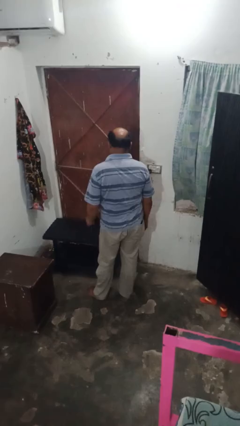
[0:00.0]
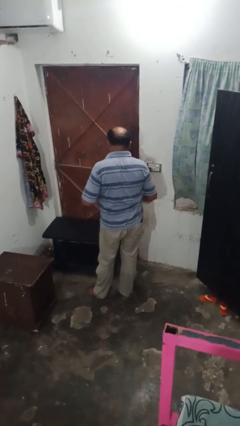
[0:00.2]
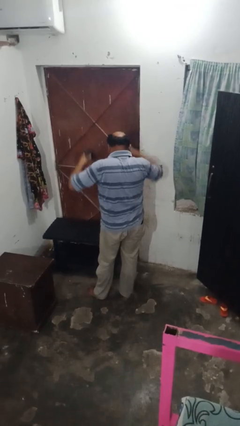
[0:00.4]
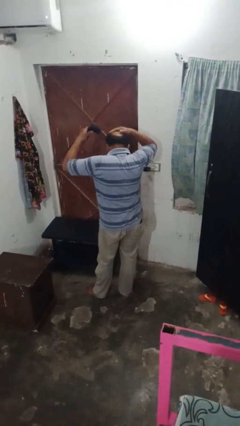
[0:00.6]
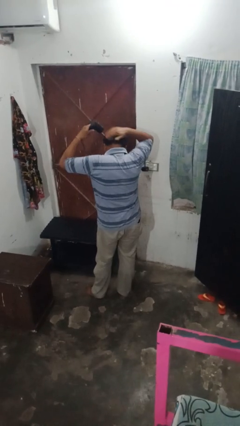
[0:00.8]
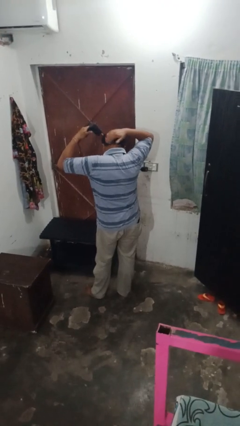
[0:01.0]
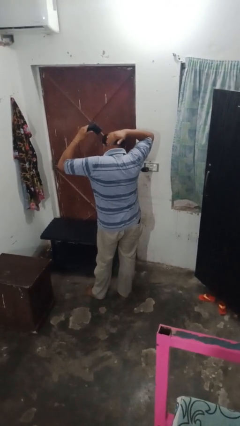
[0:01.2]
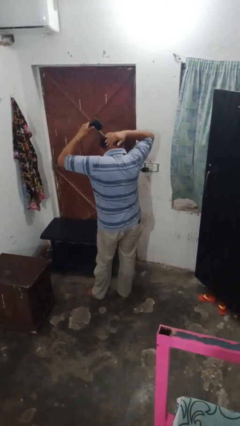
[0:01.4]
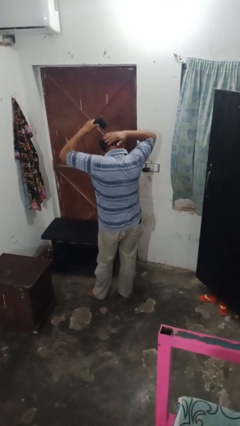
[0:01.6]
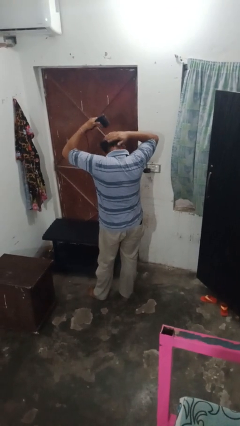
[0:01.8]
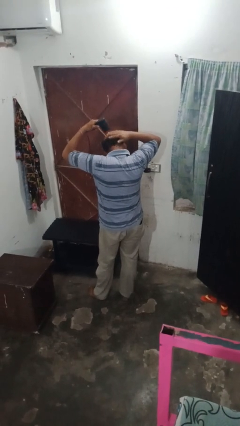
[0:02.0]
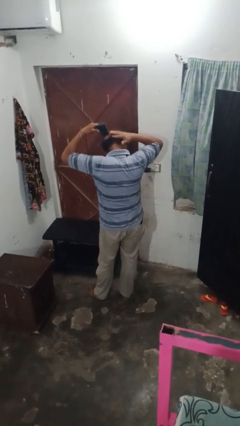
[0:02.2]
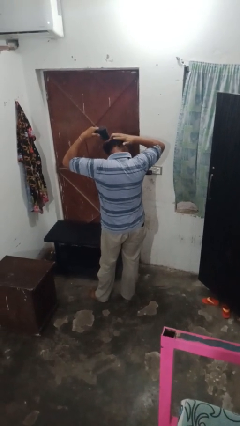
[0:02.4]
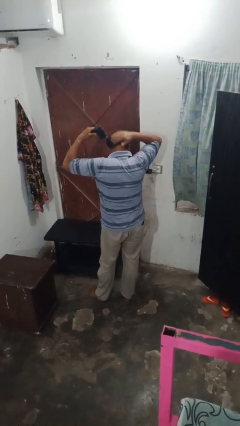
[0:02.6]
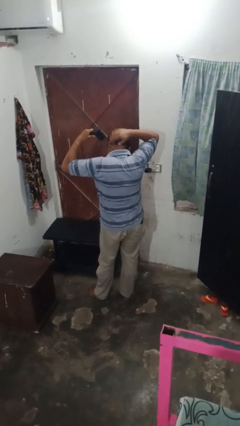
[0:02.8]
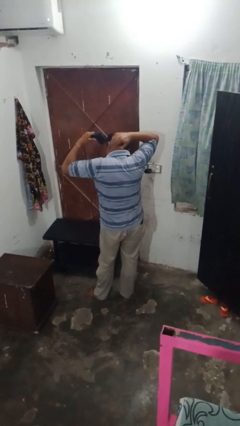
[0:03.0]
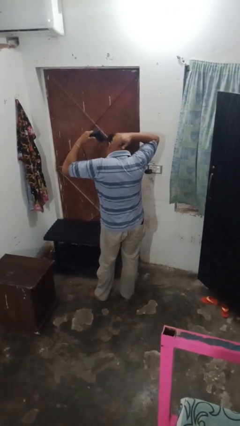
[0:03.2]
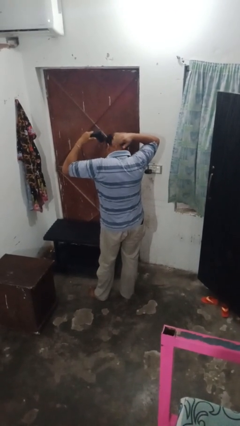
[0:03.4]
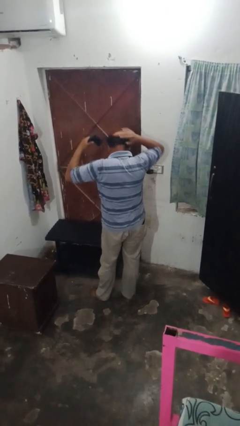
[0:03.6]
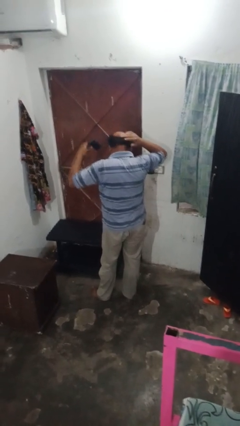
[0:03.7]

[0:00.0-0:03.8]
person dries hair with hairdryer

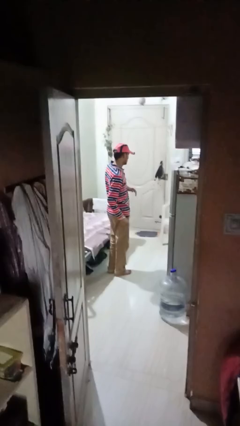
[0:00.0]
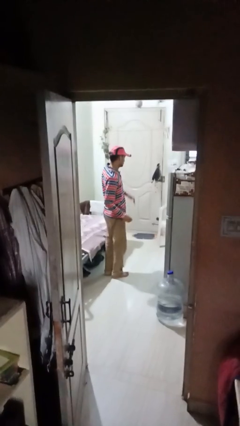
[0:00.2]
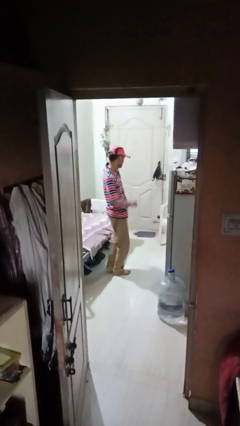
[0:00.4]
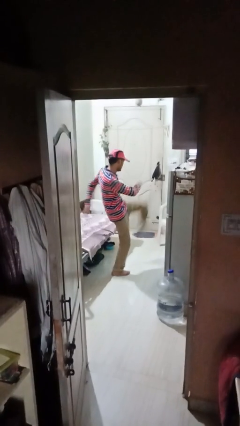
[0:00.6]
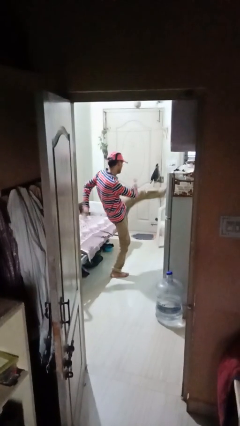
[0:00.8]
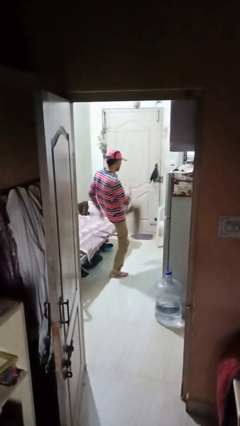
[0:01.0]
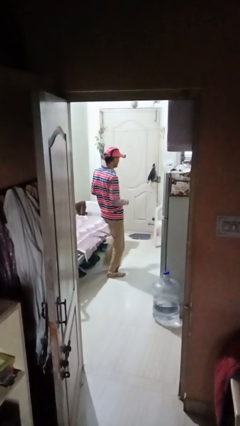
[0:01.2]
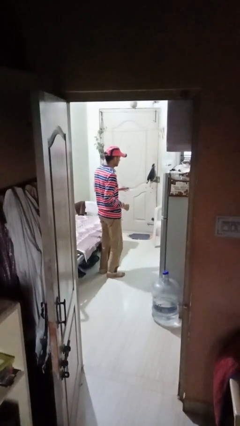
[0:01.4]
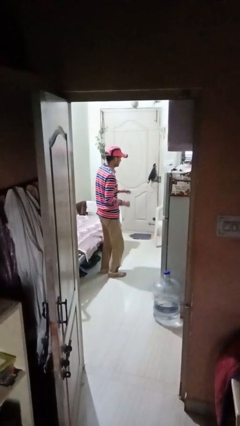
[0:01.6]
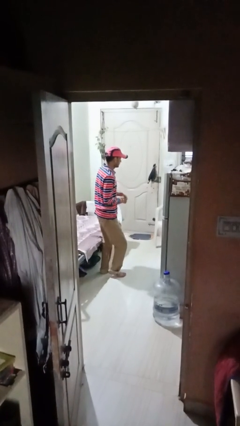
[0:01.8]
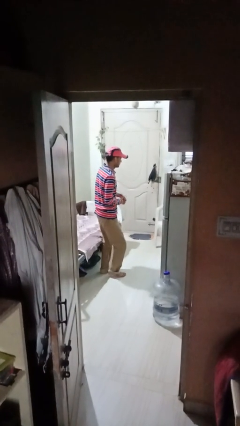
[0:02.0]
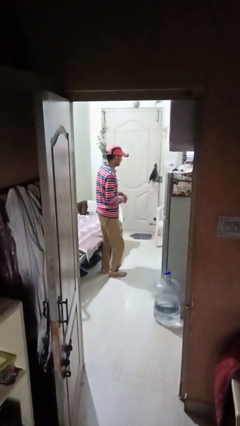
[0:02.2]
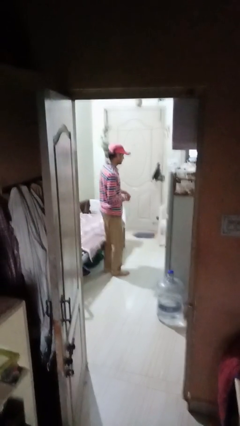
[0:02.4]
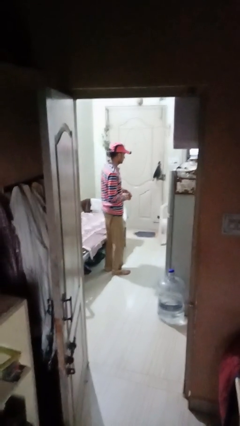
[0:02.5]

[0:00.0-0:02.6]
person karate kicks

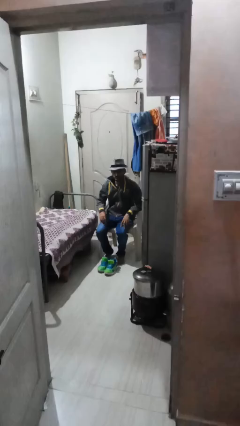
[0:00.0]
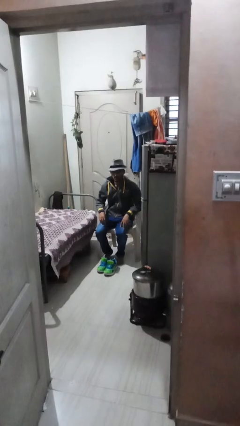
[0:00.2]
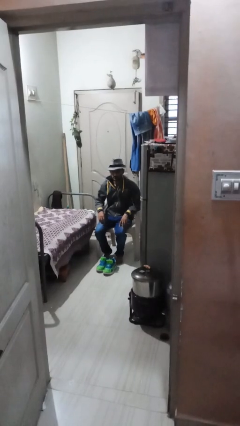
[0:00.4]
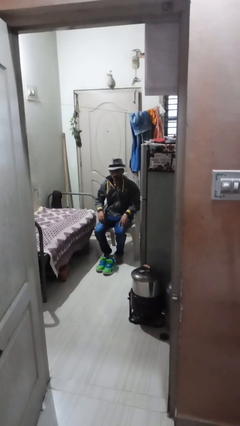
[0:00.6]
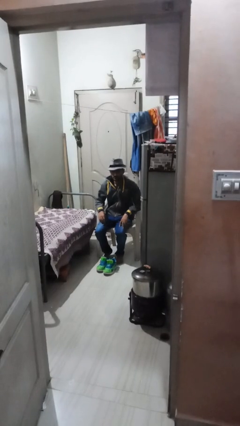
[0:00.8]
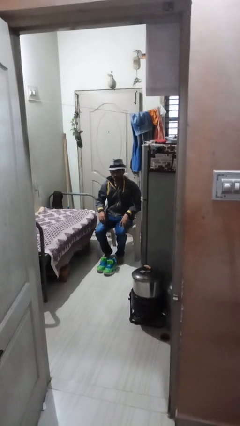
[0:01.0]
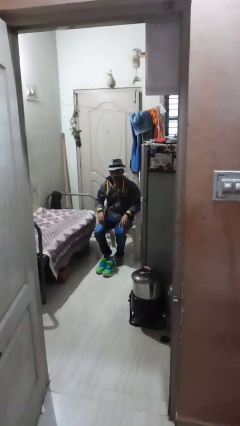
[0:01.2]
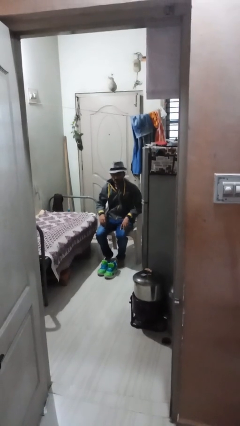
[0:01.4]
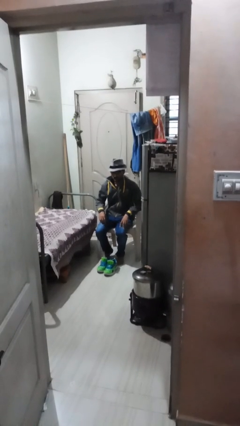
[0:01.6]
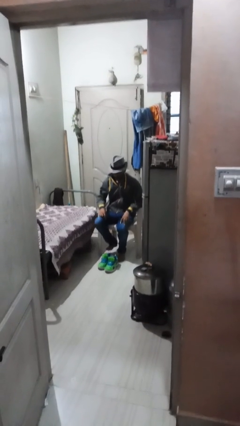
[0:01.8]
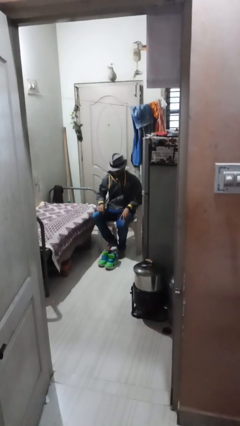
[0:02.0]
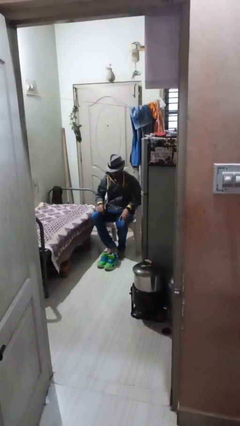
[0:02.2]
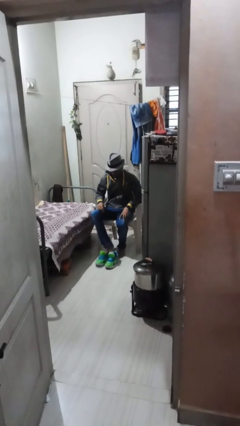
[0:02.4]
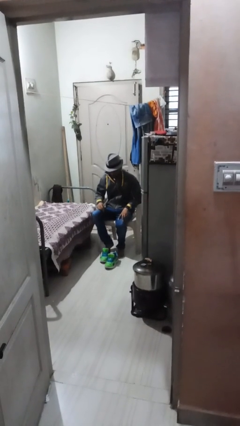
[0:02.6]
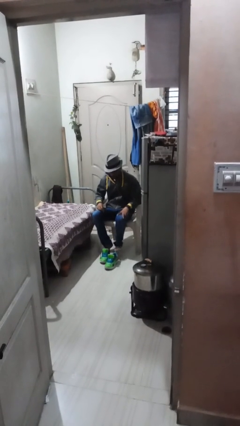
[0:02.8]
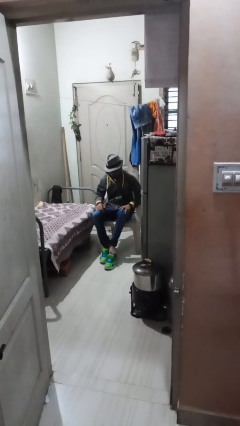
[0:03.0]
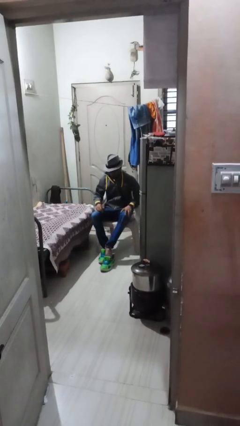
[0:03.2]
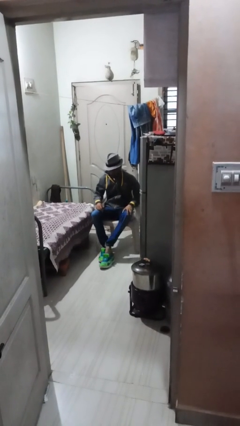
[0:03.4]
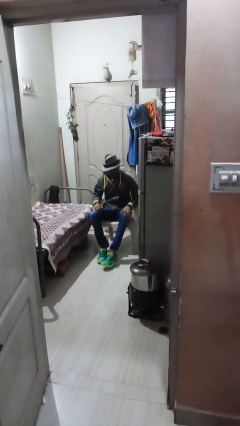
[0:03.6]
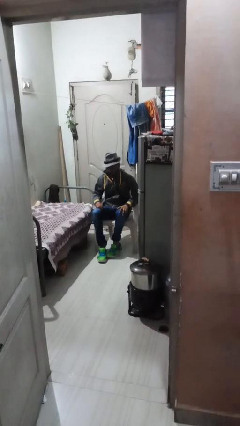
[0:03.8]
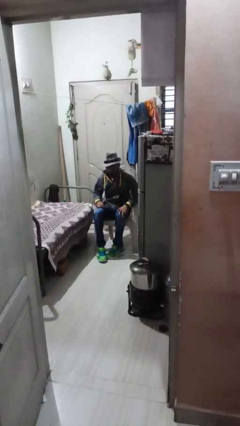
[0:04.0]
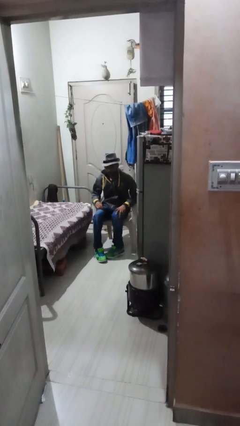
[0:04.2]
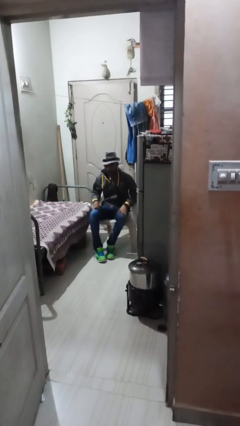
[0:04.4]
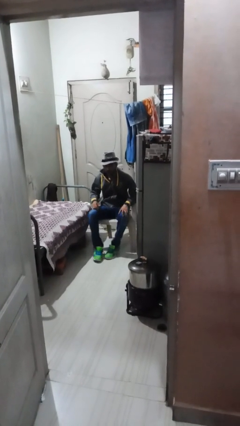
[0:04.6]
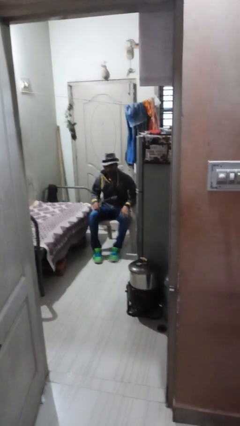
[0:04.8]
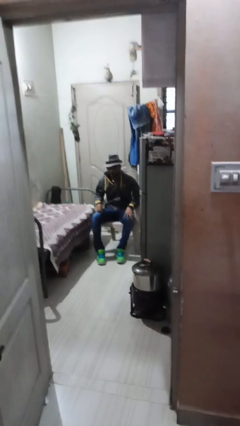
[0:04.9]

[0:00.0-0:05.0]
person puts on shoes

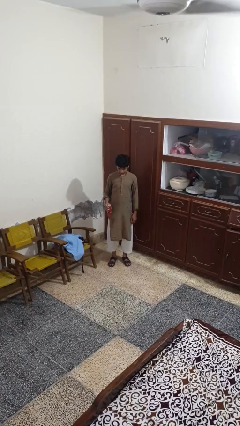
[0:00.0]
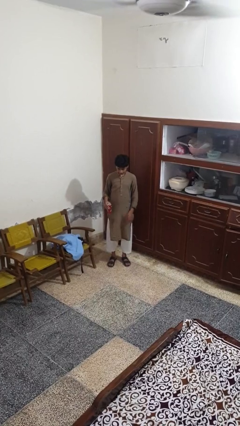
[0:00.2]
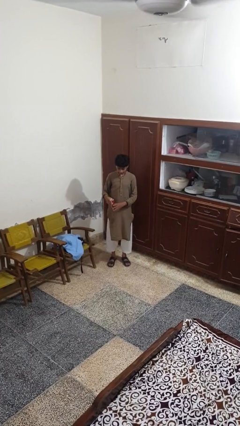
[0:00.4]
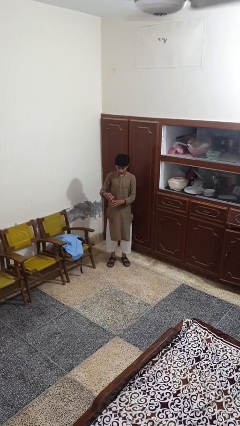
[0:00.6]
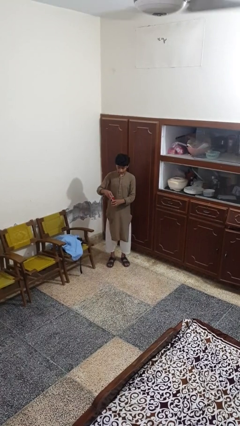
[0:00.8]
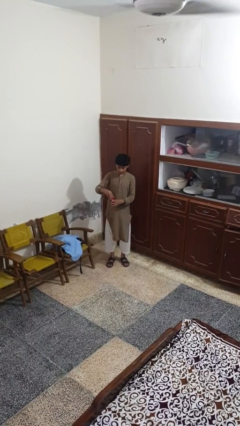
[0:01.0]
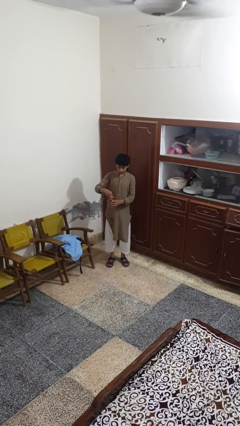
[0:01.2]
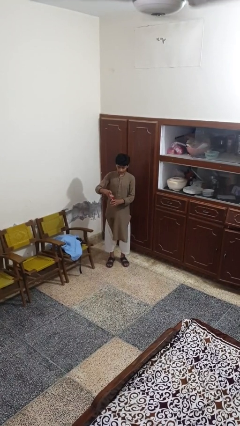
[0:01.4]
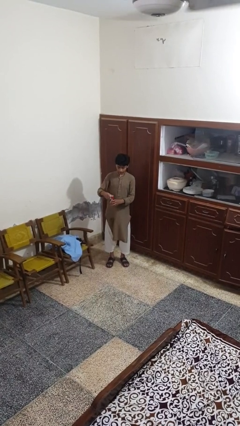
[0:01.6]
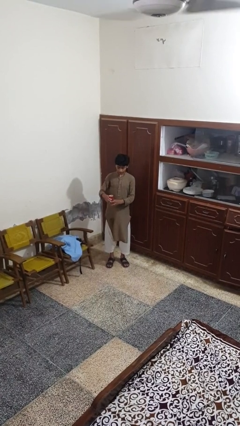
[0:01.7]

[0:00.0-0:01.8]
person opens beverage can

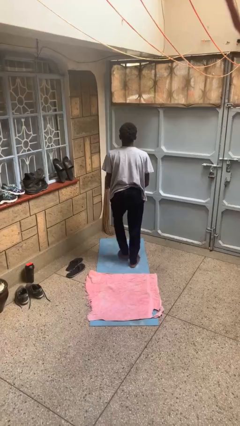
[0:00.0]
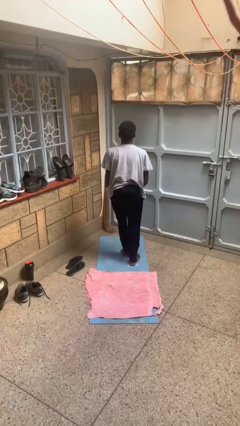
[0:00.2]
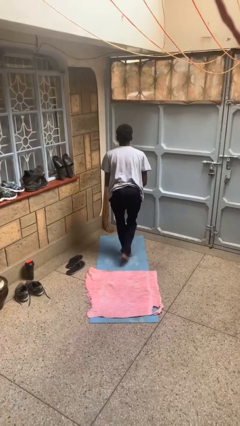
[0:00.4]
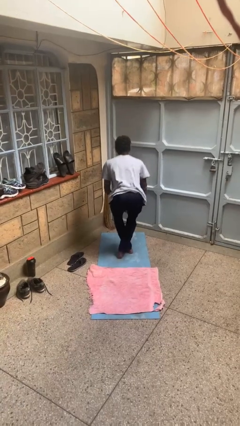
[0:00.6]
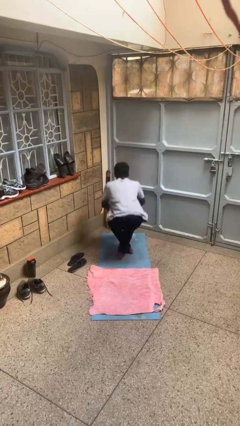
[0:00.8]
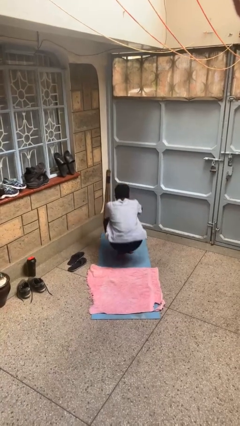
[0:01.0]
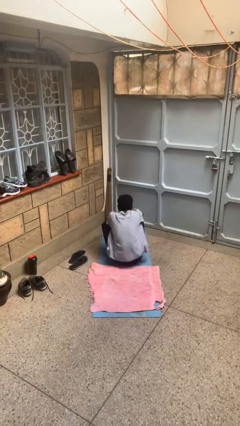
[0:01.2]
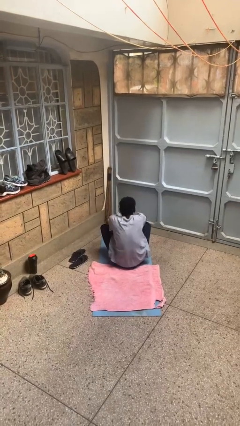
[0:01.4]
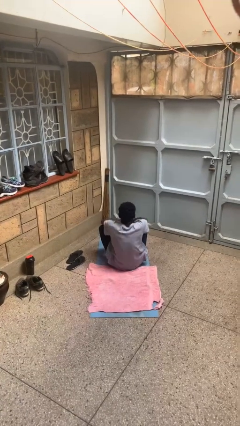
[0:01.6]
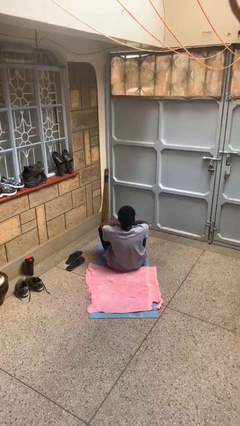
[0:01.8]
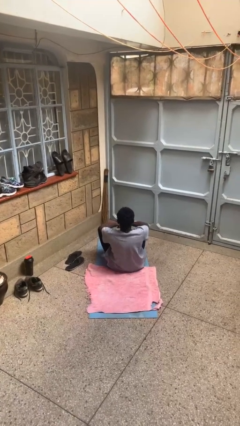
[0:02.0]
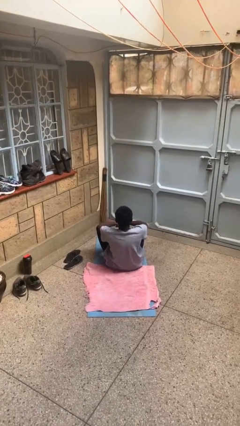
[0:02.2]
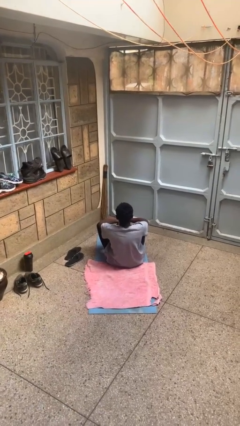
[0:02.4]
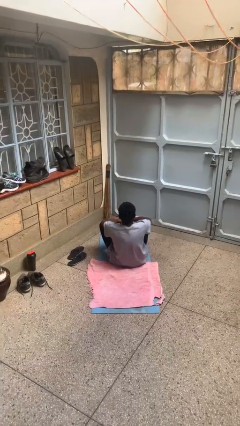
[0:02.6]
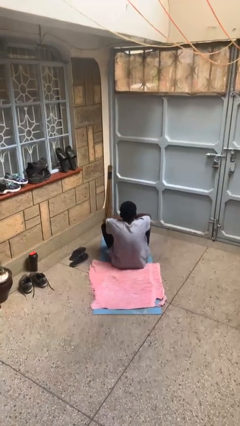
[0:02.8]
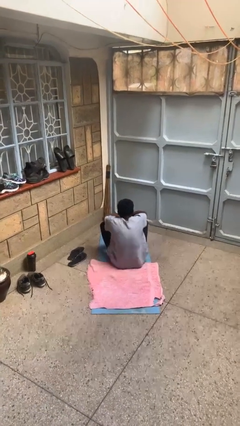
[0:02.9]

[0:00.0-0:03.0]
person sits crisscross

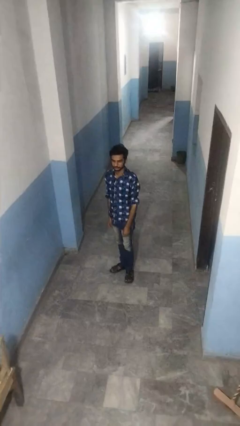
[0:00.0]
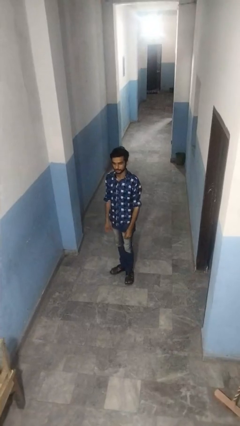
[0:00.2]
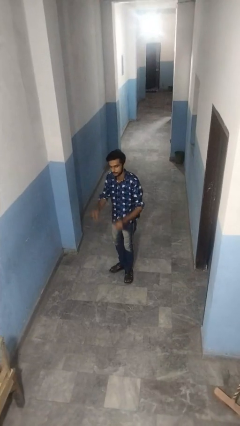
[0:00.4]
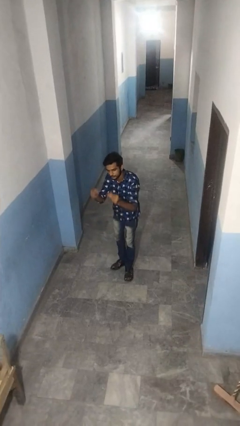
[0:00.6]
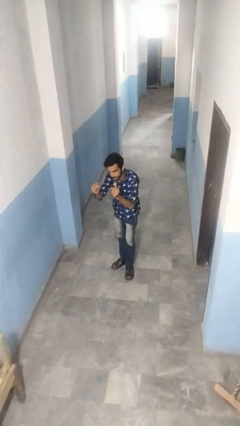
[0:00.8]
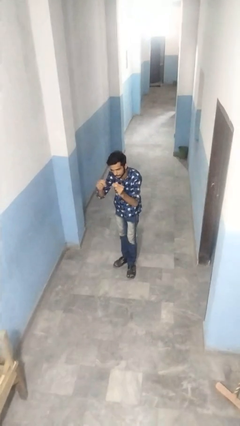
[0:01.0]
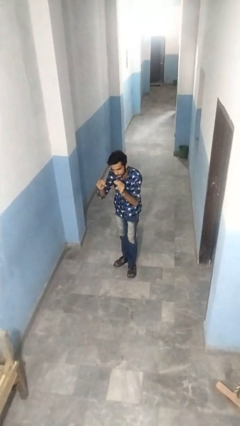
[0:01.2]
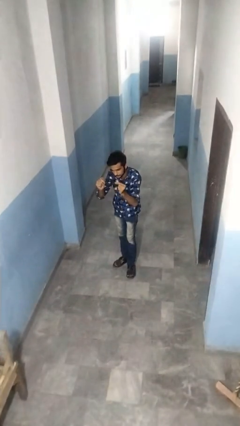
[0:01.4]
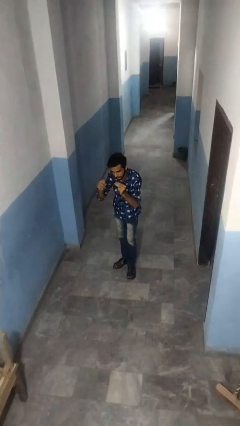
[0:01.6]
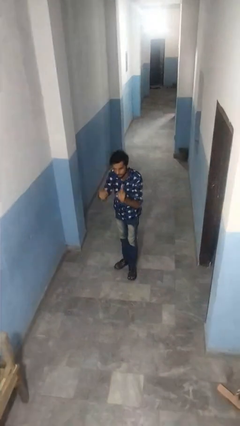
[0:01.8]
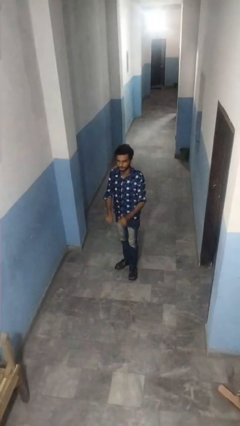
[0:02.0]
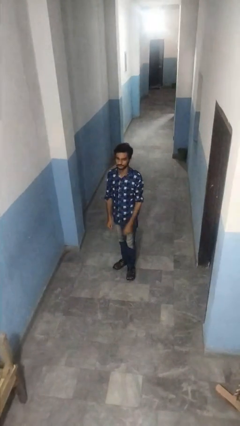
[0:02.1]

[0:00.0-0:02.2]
person snaps fingers
